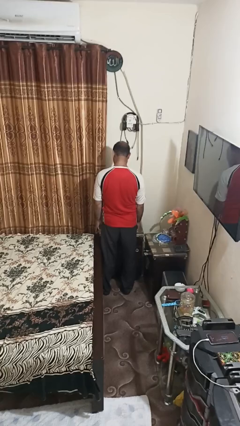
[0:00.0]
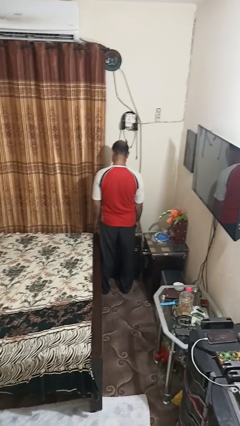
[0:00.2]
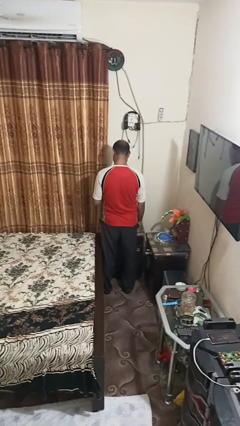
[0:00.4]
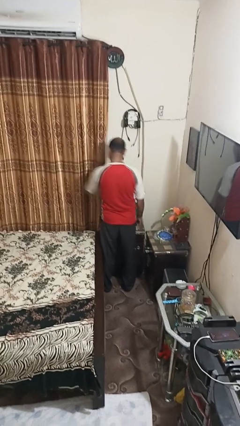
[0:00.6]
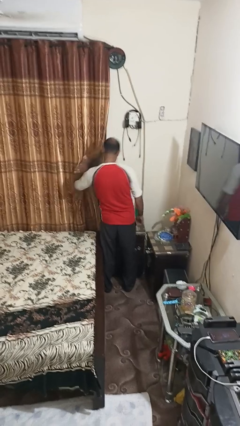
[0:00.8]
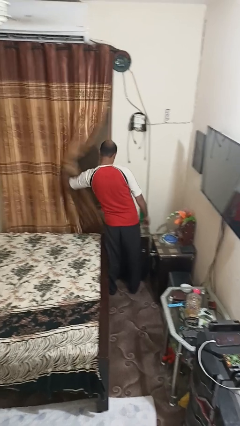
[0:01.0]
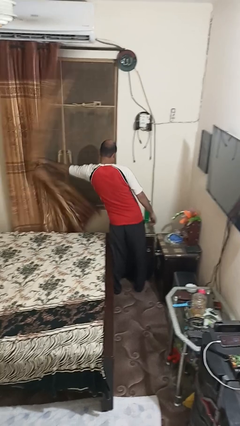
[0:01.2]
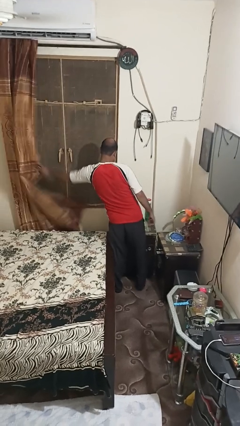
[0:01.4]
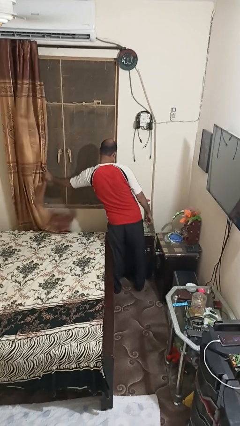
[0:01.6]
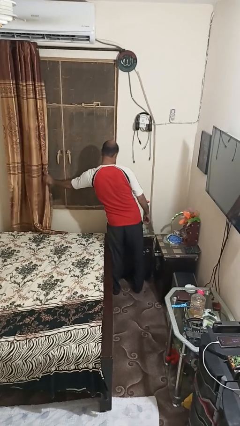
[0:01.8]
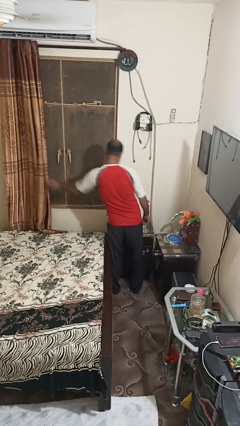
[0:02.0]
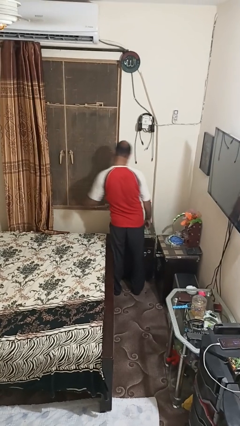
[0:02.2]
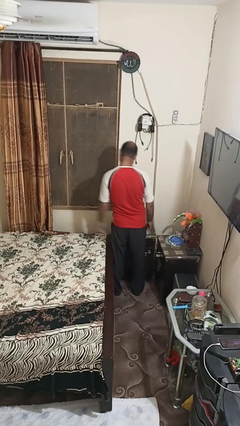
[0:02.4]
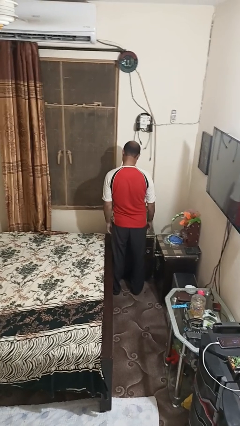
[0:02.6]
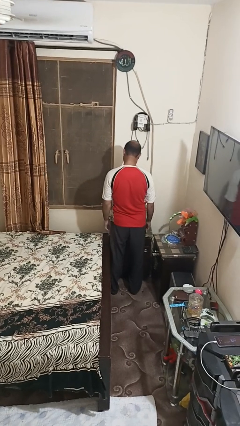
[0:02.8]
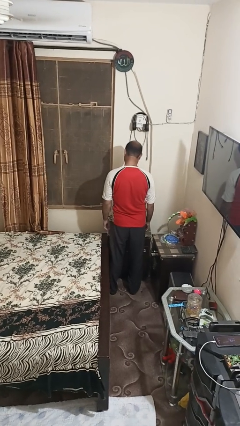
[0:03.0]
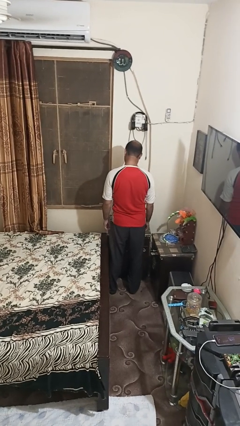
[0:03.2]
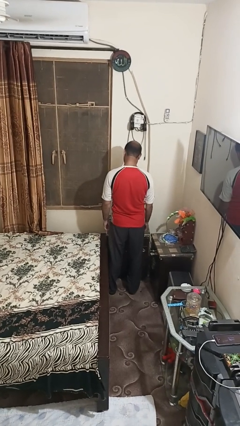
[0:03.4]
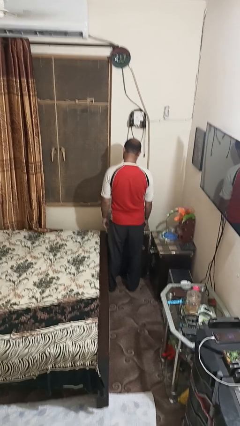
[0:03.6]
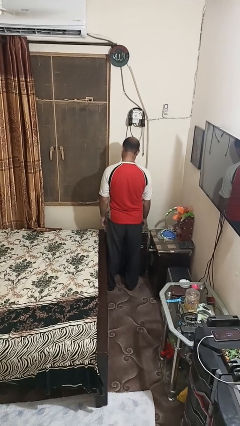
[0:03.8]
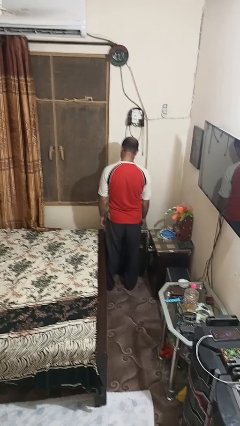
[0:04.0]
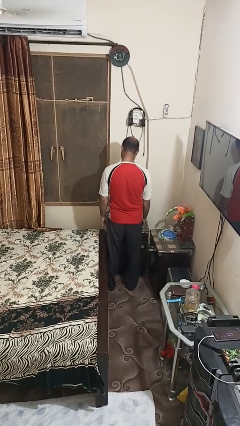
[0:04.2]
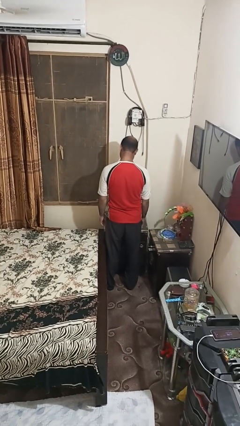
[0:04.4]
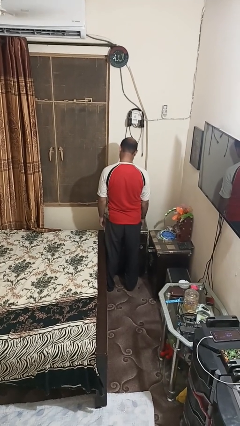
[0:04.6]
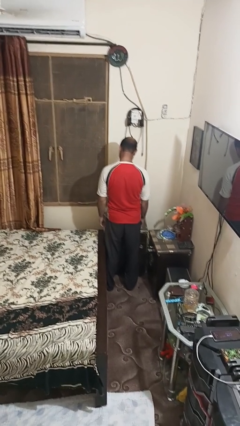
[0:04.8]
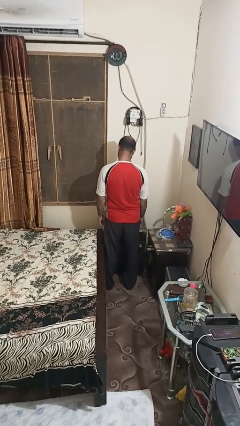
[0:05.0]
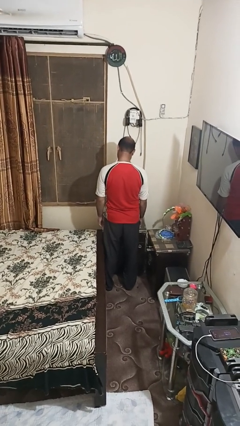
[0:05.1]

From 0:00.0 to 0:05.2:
person opens curtains

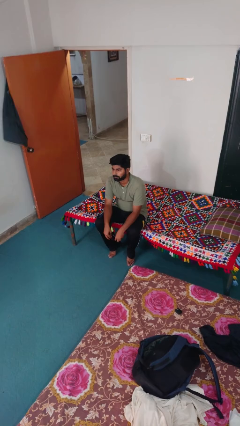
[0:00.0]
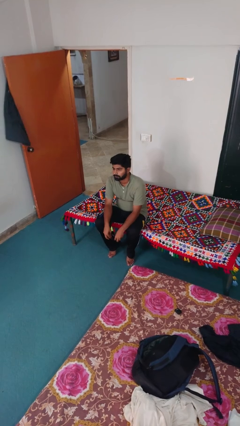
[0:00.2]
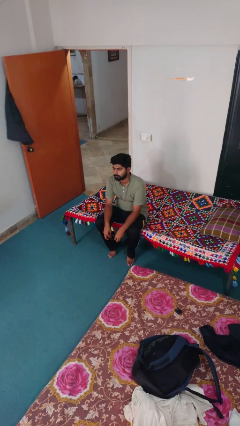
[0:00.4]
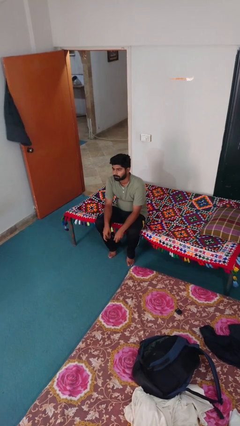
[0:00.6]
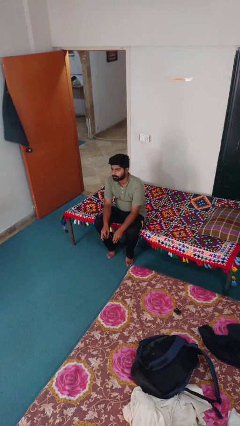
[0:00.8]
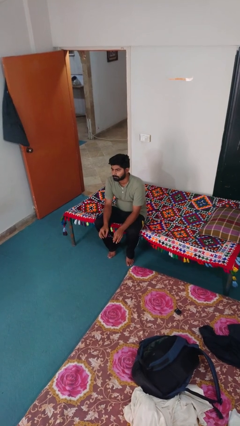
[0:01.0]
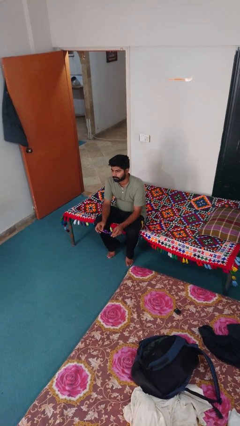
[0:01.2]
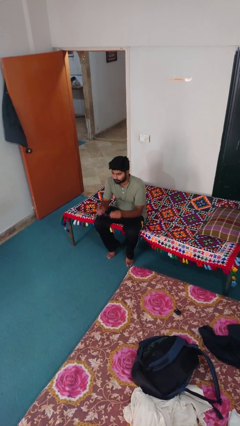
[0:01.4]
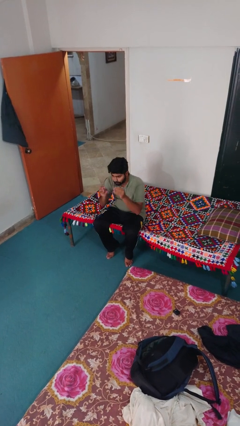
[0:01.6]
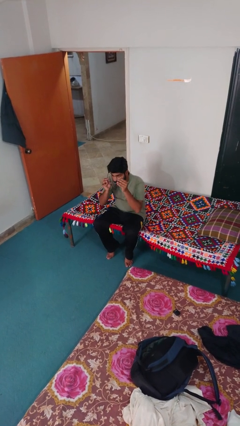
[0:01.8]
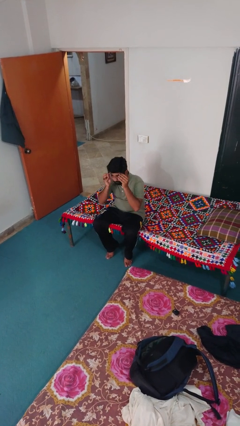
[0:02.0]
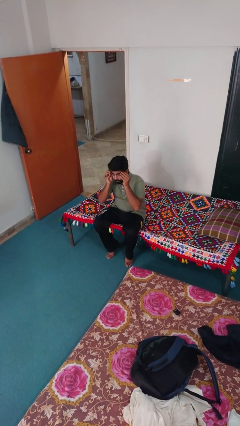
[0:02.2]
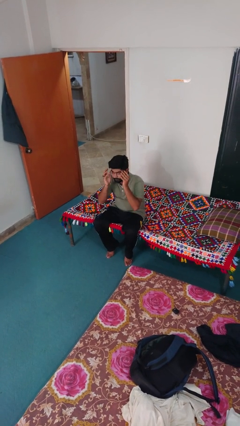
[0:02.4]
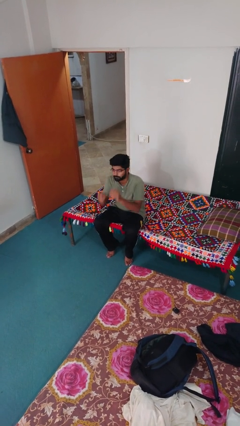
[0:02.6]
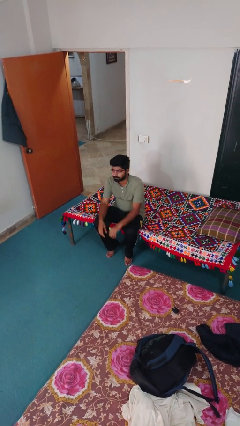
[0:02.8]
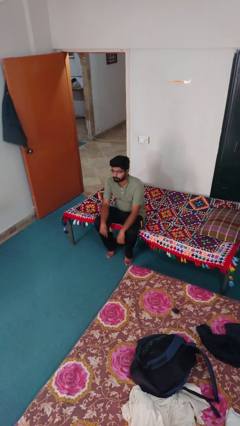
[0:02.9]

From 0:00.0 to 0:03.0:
person puts on glasses

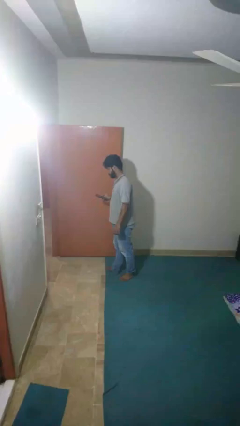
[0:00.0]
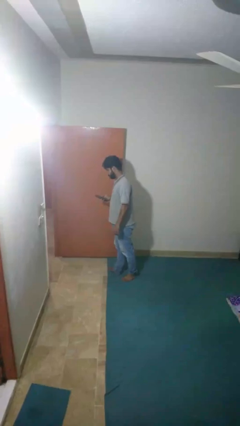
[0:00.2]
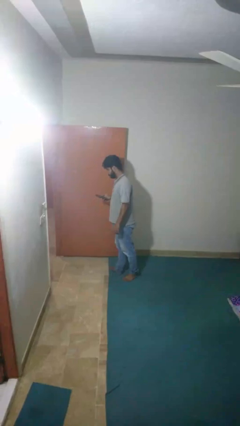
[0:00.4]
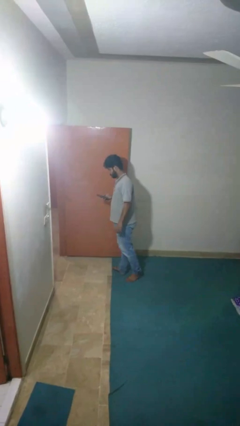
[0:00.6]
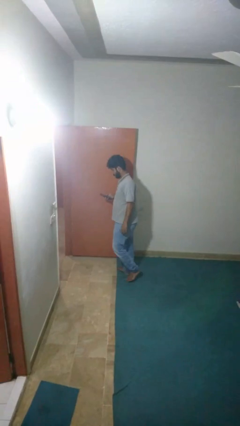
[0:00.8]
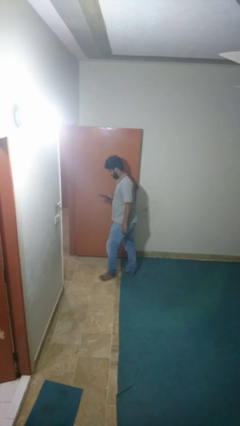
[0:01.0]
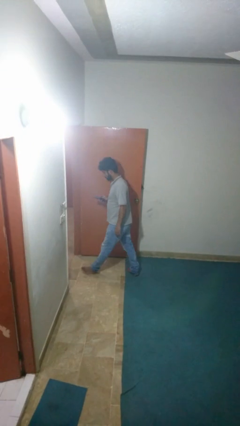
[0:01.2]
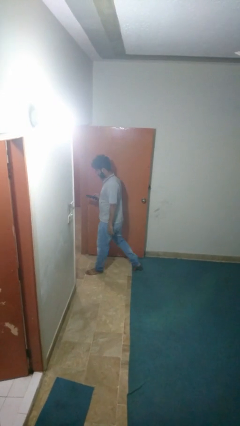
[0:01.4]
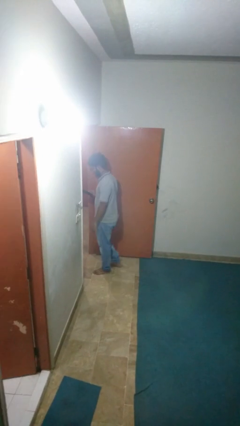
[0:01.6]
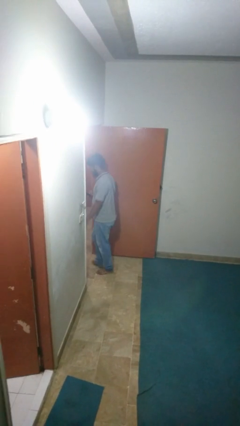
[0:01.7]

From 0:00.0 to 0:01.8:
person exits scene through structure

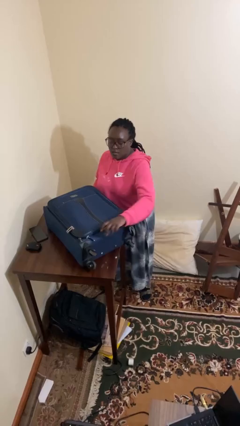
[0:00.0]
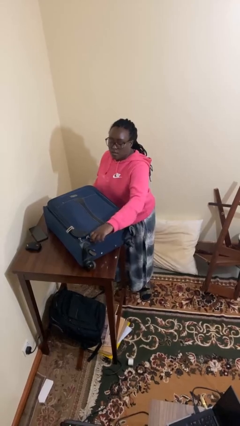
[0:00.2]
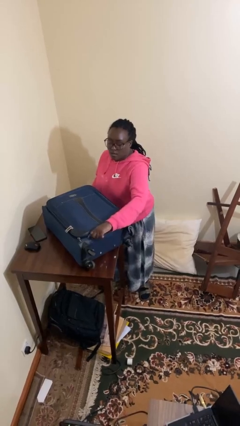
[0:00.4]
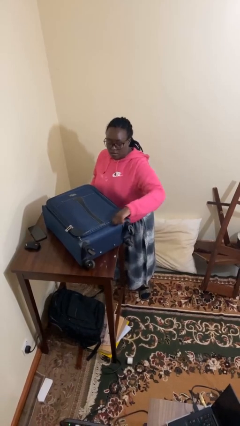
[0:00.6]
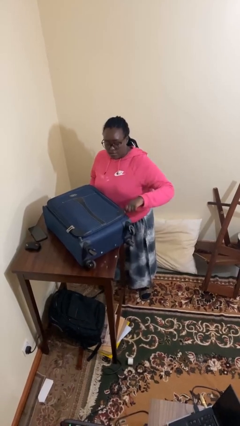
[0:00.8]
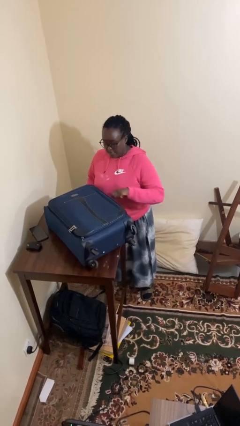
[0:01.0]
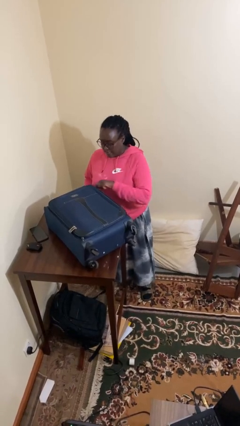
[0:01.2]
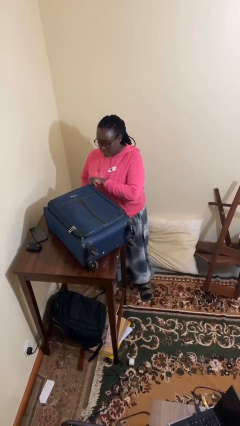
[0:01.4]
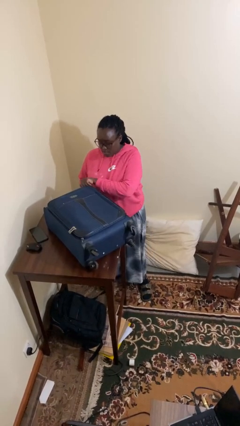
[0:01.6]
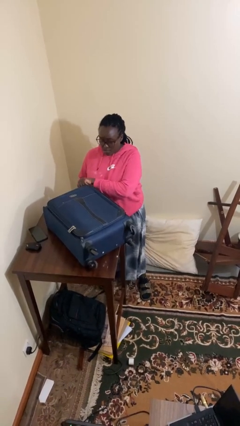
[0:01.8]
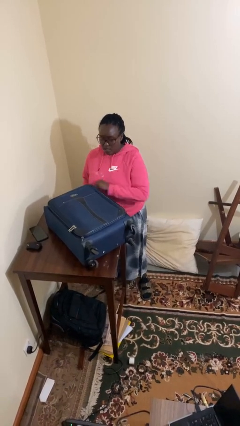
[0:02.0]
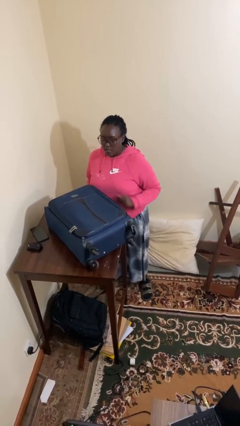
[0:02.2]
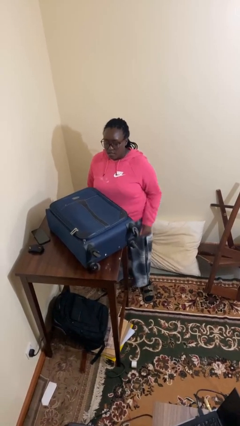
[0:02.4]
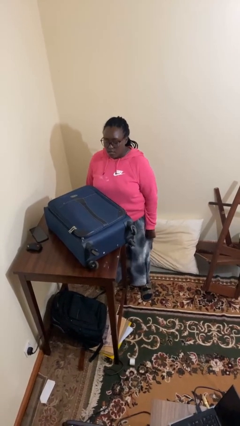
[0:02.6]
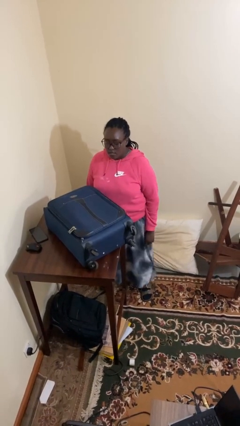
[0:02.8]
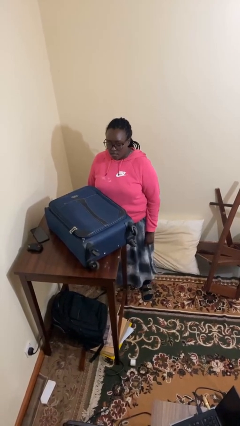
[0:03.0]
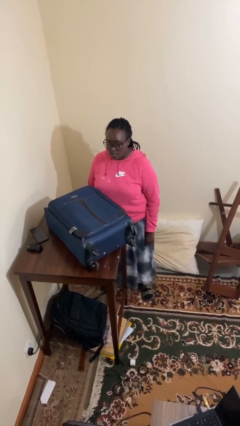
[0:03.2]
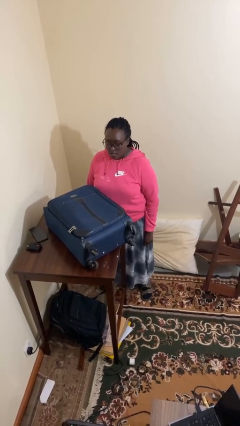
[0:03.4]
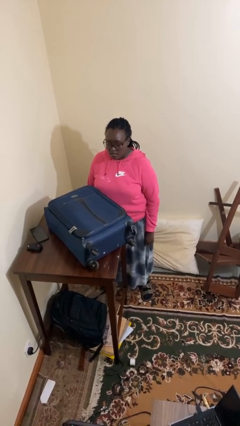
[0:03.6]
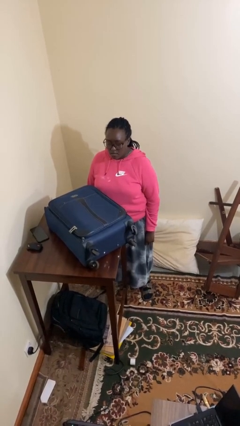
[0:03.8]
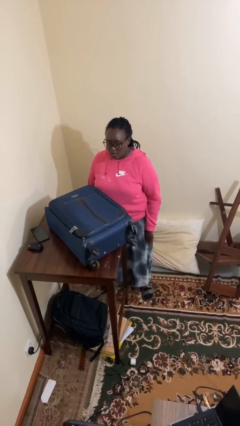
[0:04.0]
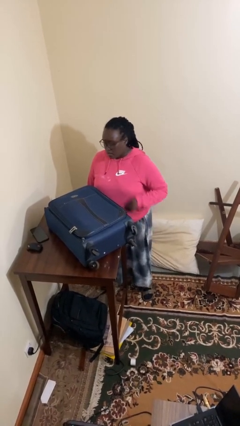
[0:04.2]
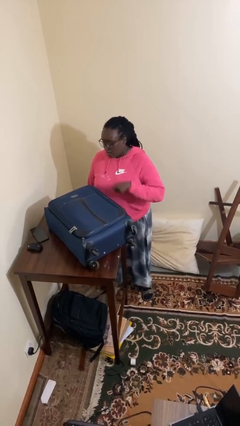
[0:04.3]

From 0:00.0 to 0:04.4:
person opens suitcase

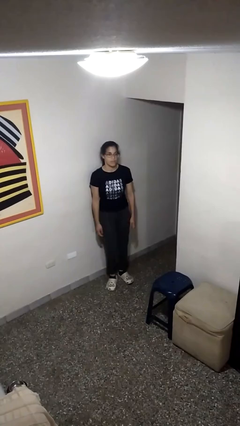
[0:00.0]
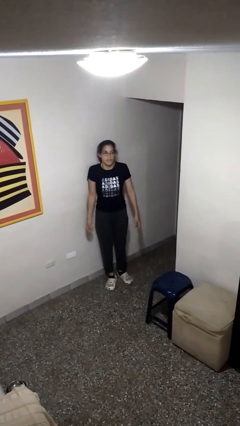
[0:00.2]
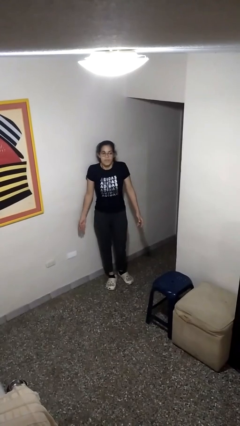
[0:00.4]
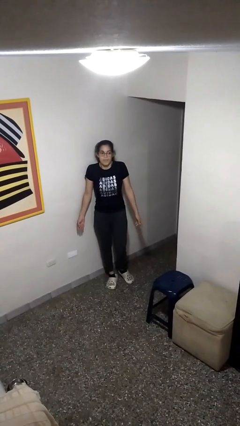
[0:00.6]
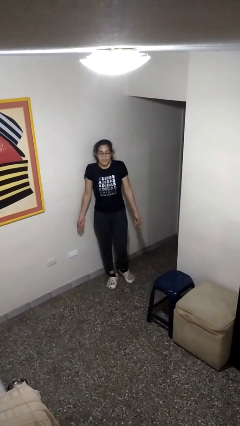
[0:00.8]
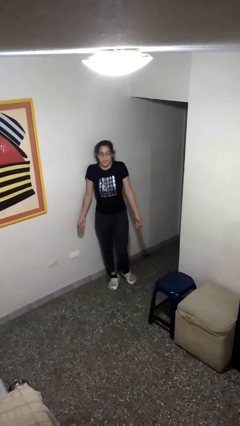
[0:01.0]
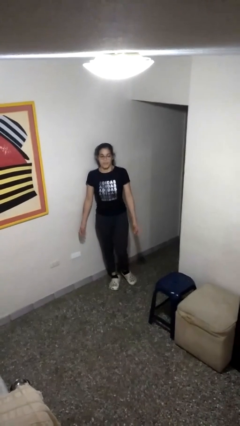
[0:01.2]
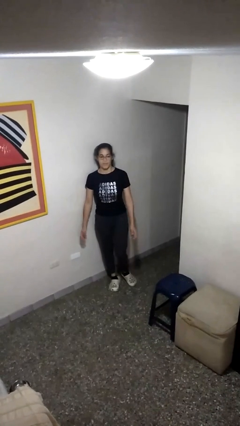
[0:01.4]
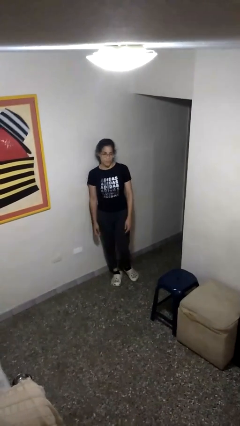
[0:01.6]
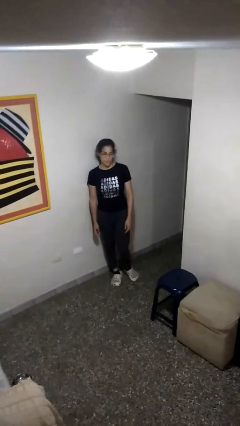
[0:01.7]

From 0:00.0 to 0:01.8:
person shrugs

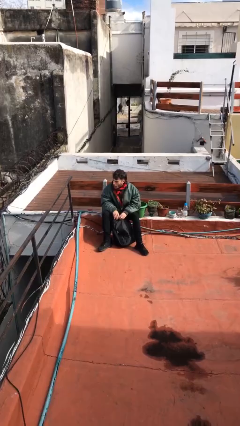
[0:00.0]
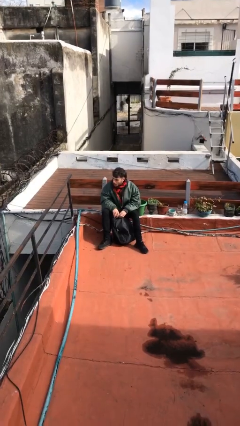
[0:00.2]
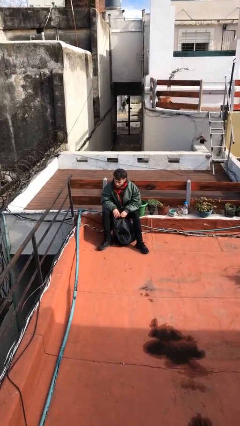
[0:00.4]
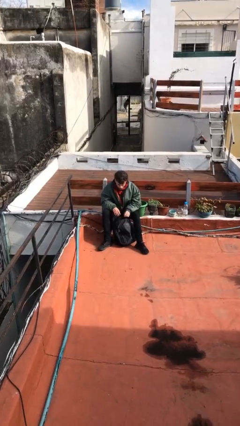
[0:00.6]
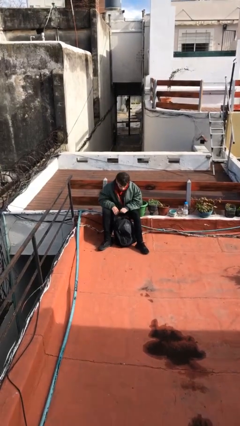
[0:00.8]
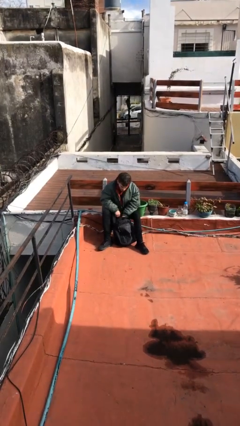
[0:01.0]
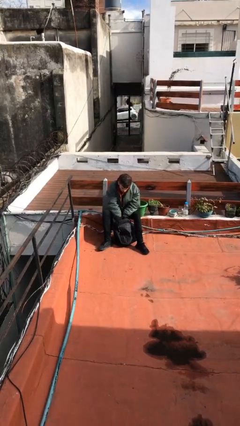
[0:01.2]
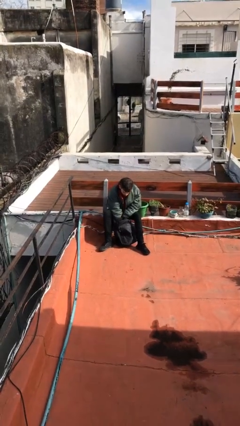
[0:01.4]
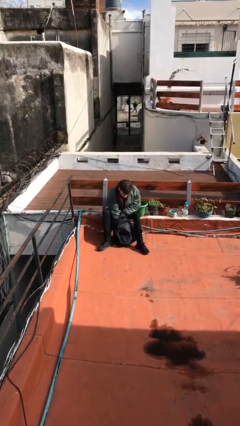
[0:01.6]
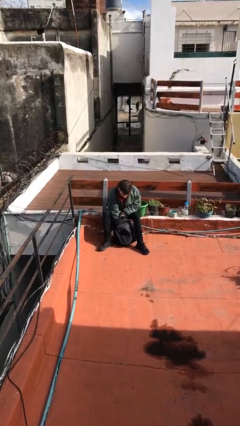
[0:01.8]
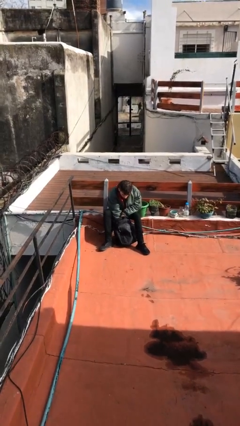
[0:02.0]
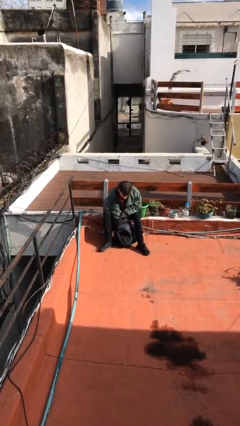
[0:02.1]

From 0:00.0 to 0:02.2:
person searches in backpack
